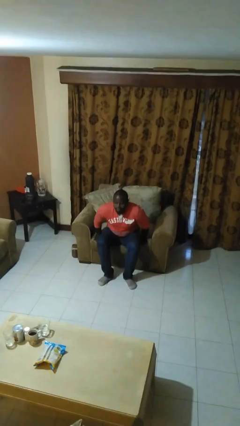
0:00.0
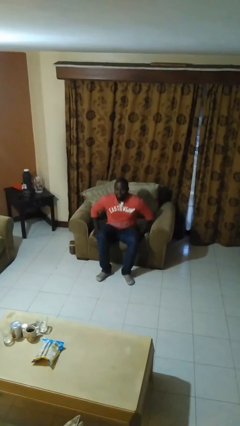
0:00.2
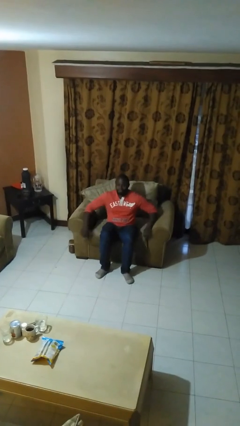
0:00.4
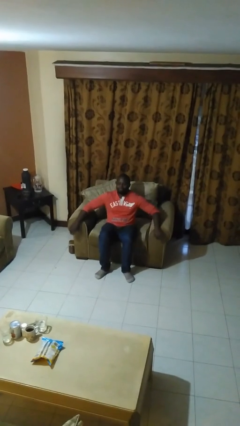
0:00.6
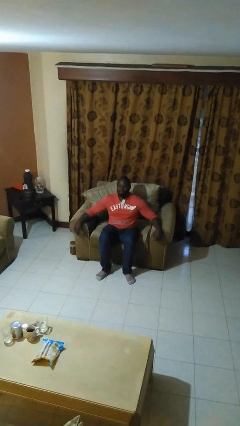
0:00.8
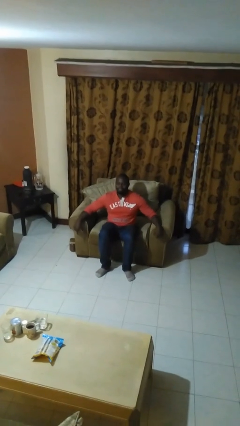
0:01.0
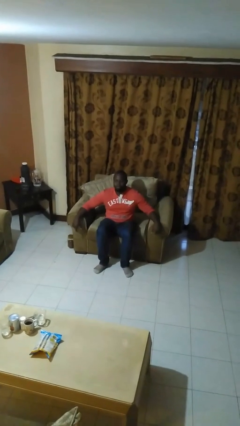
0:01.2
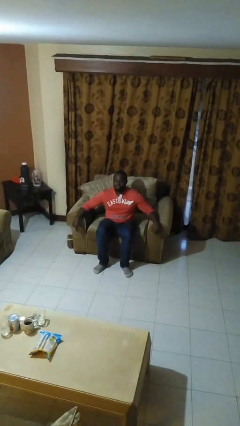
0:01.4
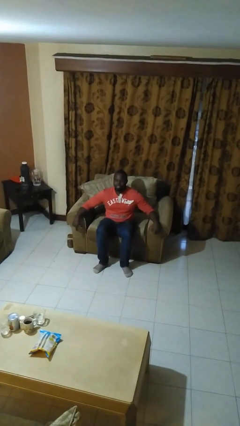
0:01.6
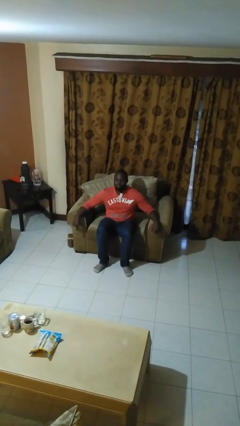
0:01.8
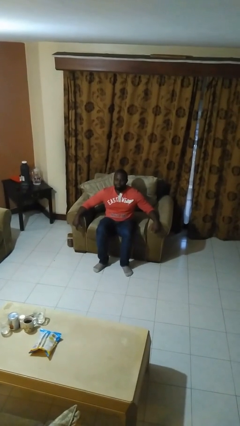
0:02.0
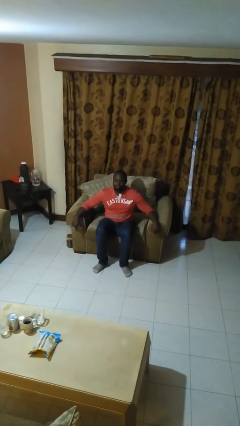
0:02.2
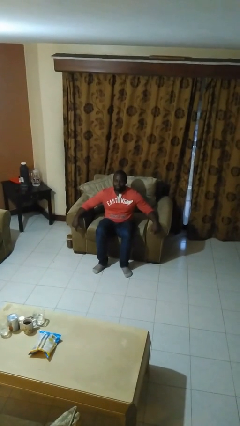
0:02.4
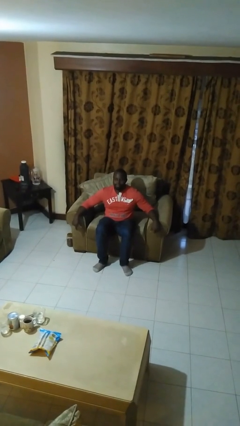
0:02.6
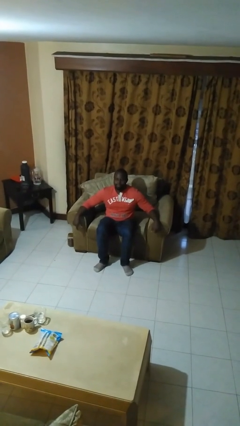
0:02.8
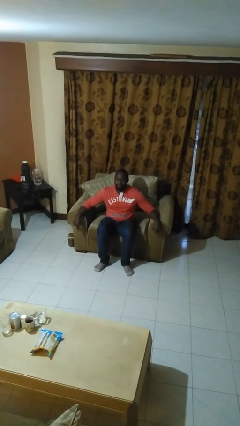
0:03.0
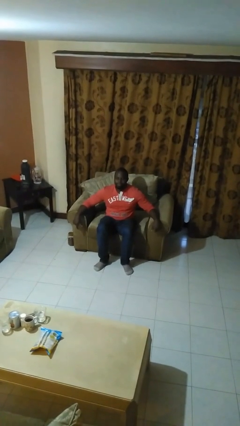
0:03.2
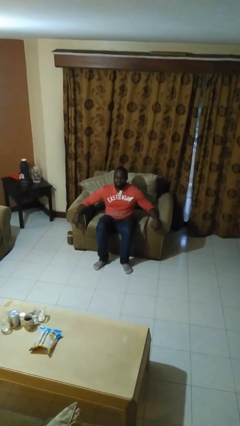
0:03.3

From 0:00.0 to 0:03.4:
person sits down

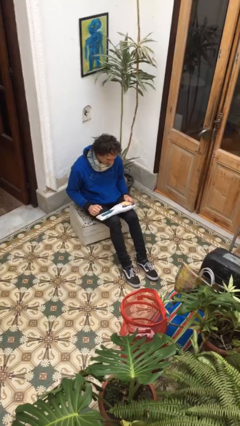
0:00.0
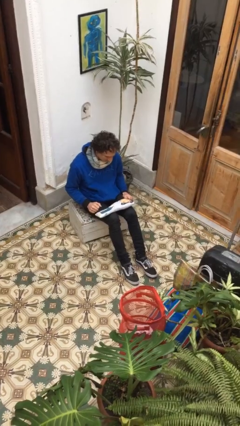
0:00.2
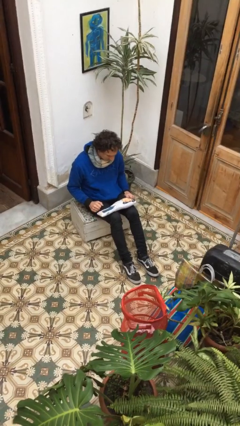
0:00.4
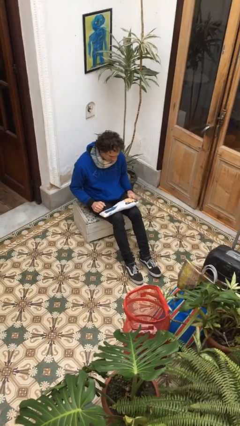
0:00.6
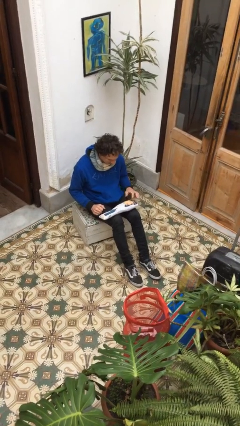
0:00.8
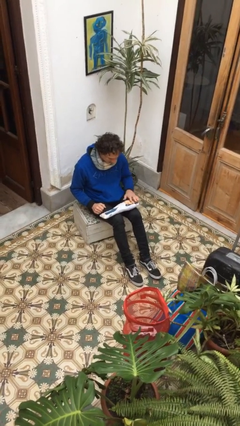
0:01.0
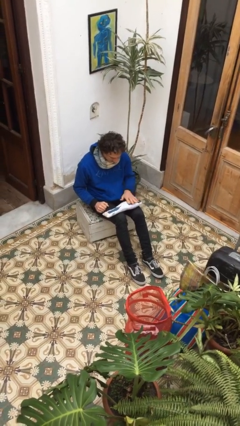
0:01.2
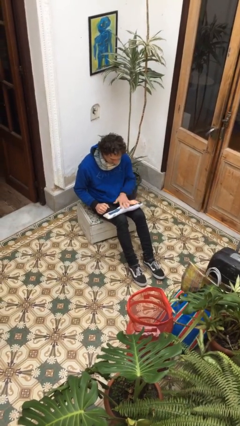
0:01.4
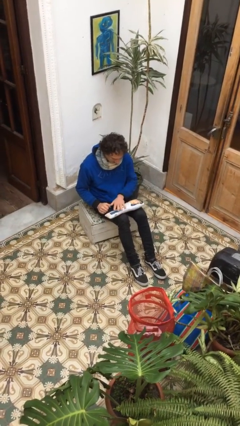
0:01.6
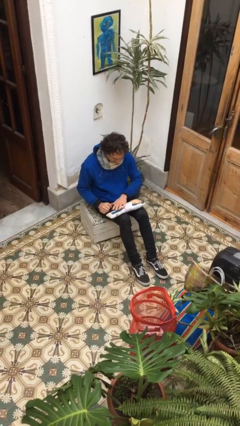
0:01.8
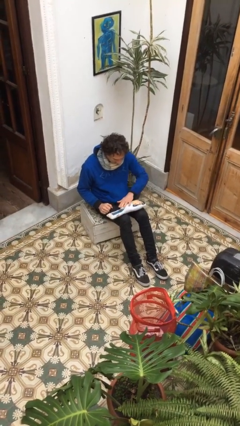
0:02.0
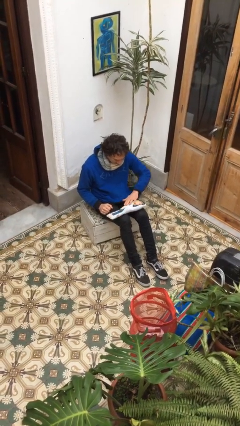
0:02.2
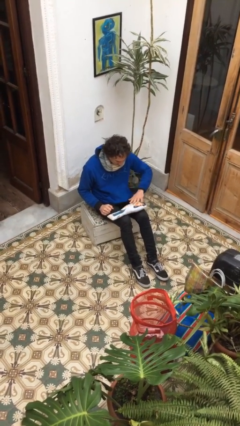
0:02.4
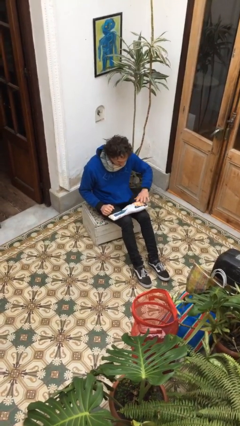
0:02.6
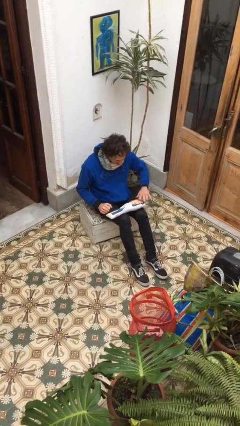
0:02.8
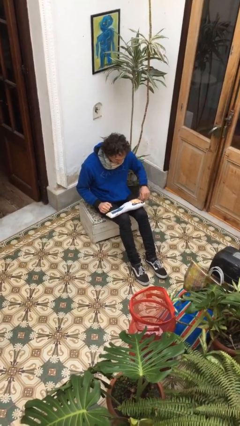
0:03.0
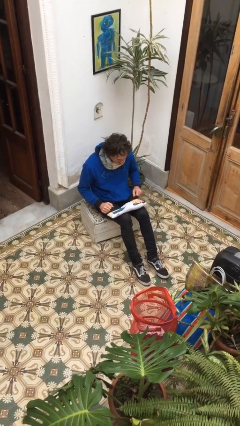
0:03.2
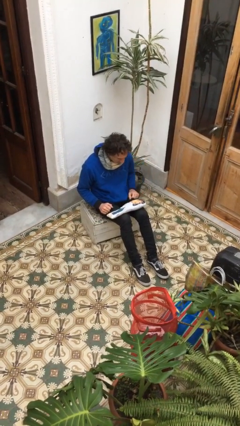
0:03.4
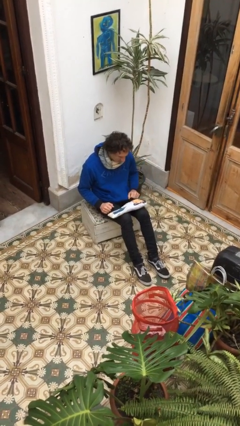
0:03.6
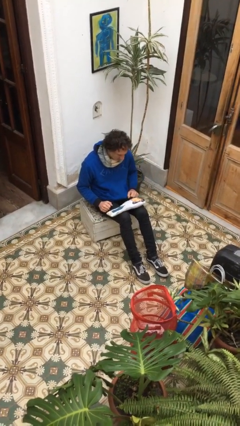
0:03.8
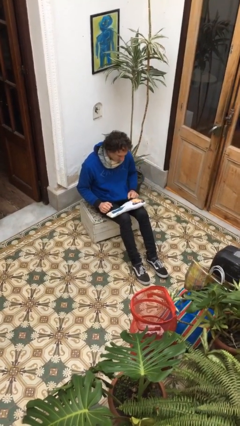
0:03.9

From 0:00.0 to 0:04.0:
person waves hand over object

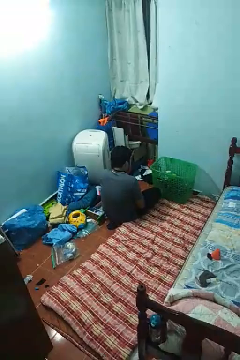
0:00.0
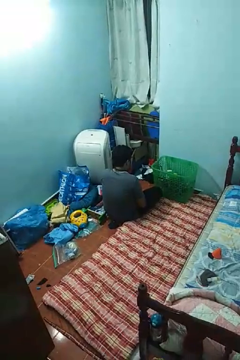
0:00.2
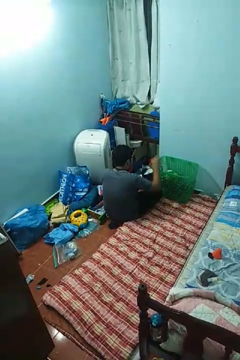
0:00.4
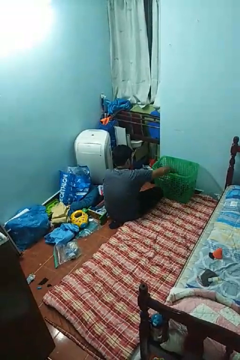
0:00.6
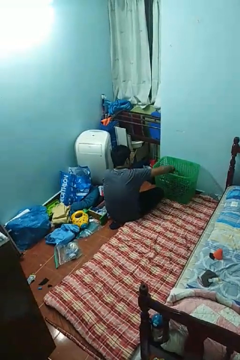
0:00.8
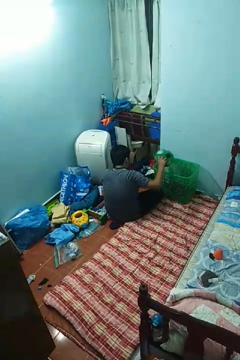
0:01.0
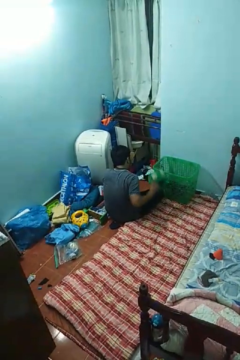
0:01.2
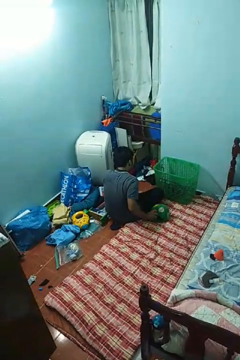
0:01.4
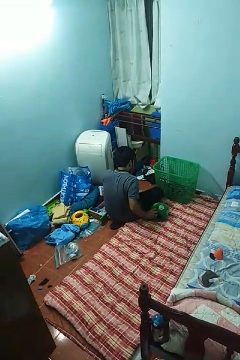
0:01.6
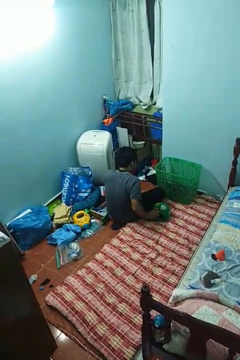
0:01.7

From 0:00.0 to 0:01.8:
person takes object from basket

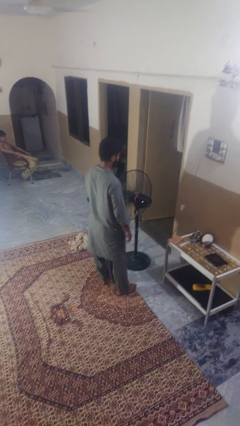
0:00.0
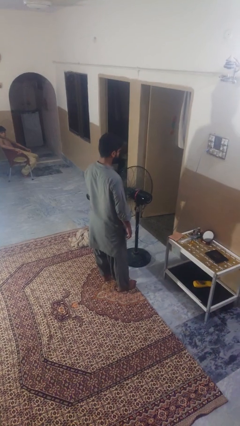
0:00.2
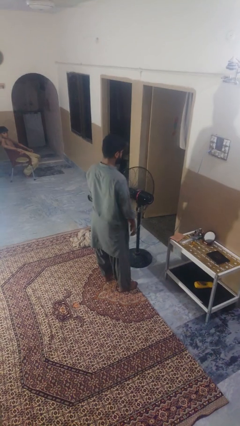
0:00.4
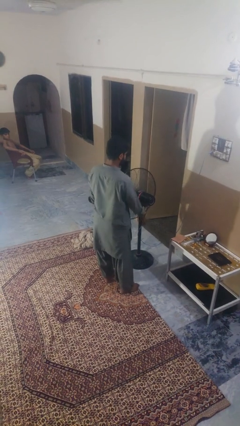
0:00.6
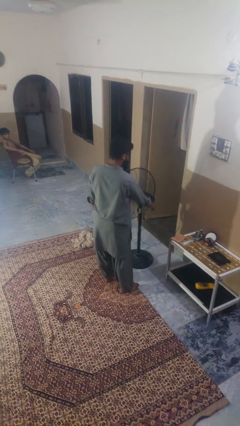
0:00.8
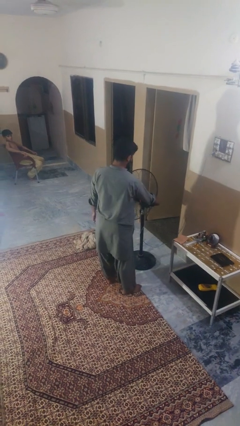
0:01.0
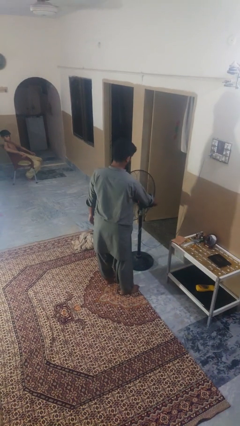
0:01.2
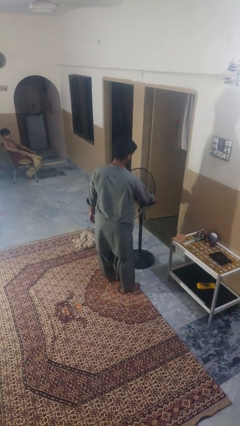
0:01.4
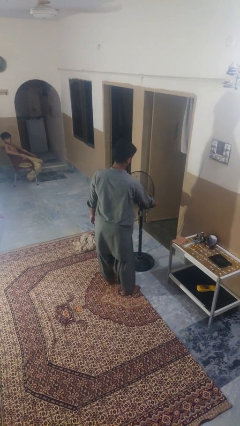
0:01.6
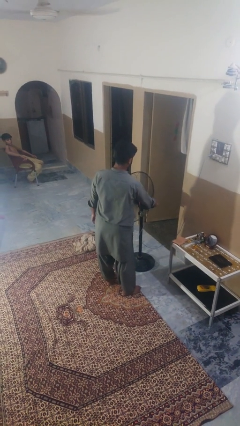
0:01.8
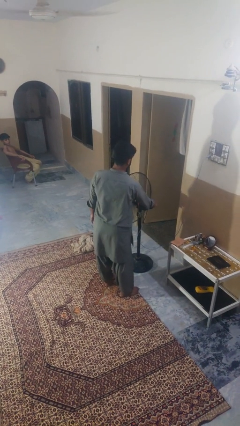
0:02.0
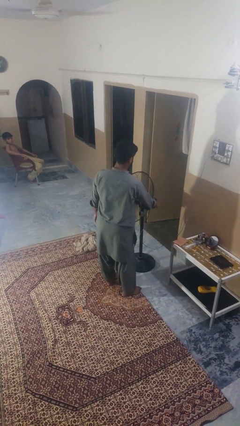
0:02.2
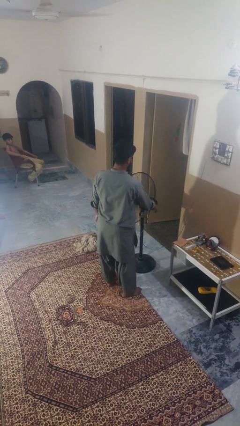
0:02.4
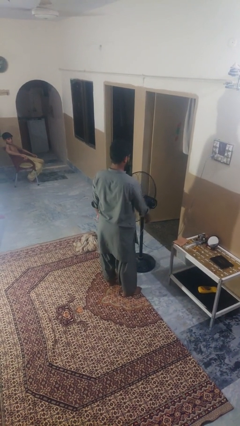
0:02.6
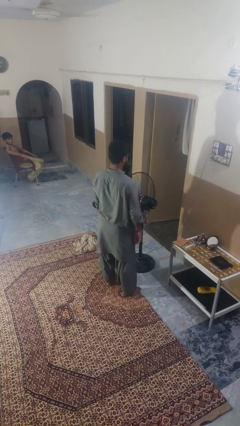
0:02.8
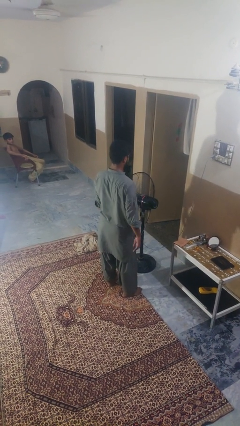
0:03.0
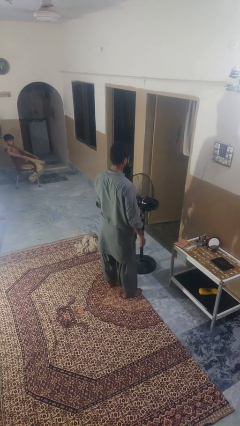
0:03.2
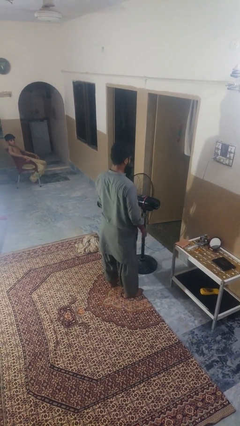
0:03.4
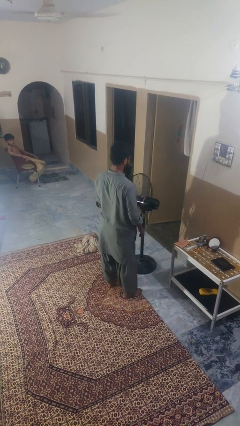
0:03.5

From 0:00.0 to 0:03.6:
person turns off fan

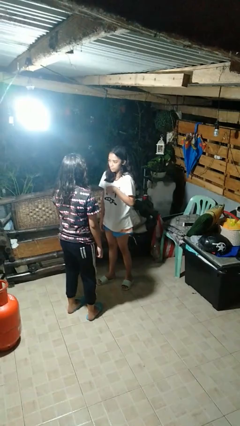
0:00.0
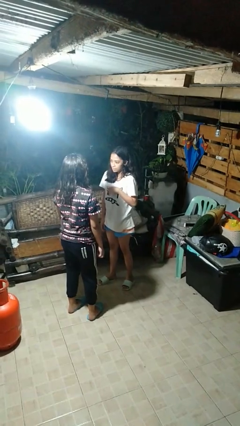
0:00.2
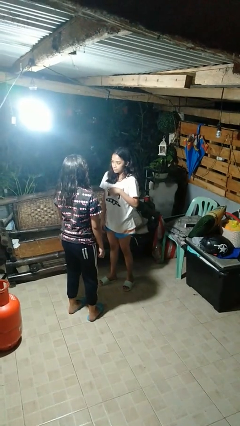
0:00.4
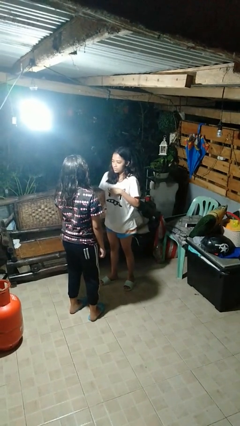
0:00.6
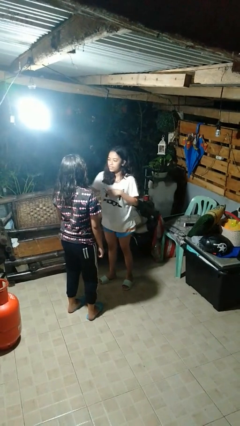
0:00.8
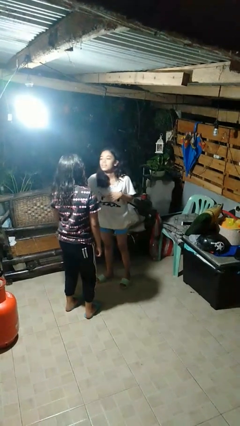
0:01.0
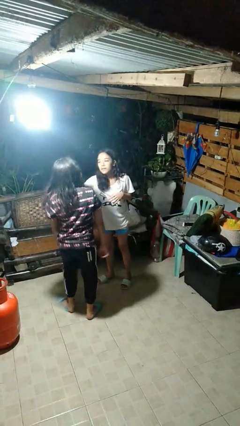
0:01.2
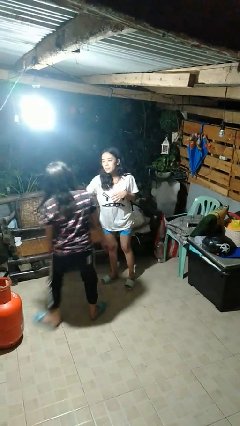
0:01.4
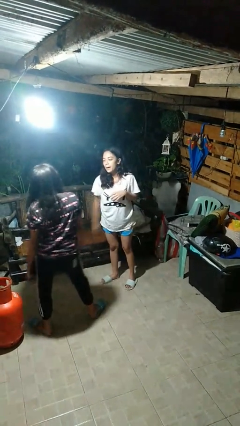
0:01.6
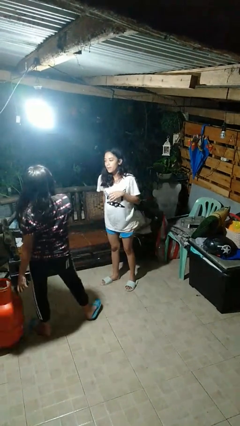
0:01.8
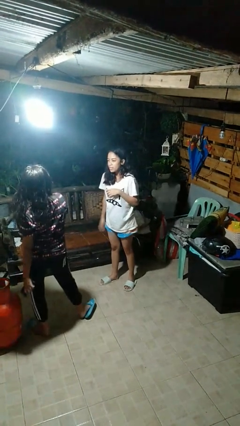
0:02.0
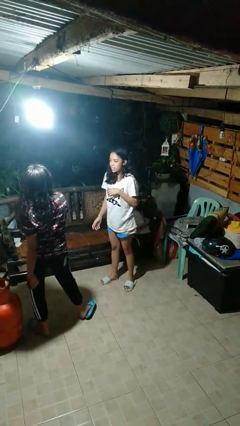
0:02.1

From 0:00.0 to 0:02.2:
person shoves person

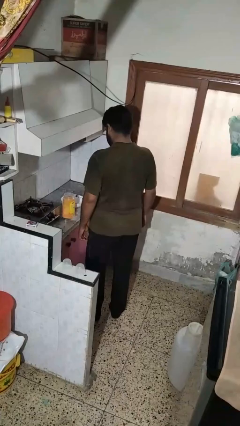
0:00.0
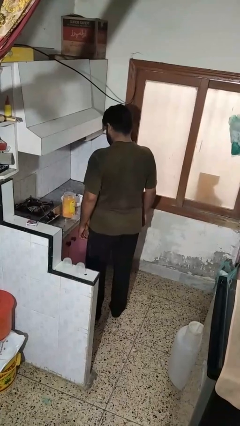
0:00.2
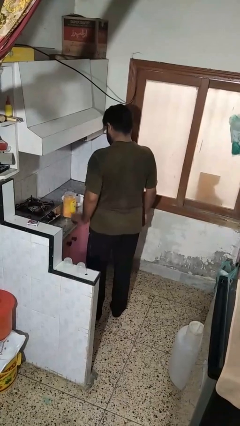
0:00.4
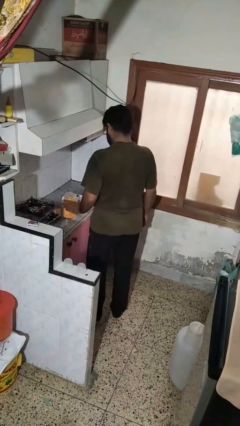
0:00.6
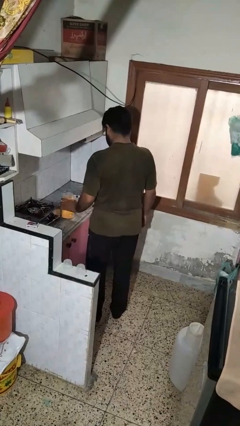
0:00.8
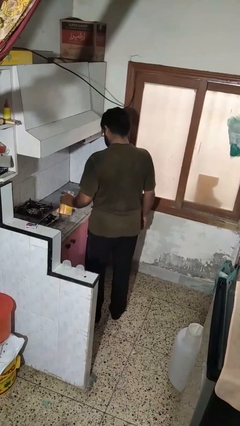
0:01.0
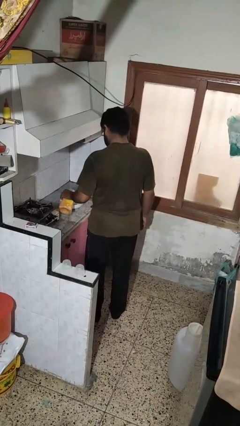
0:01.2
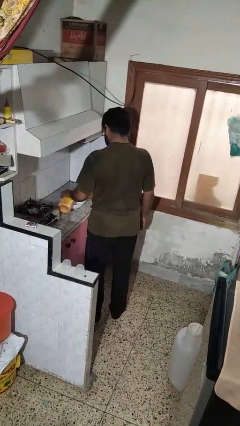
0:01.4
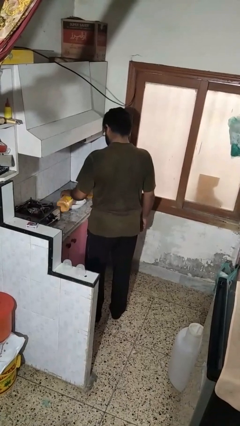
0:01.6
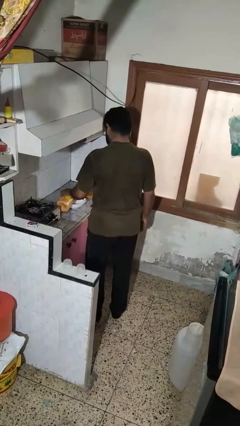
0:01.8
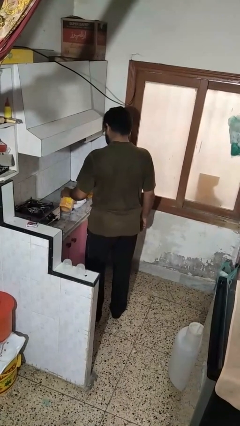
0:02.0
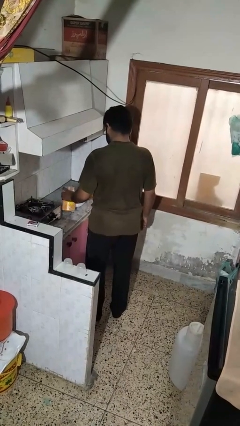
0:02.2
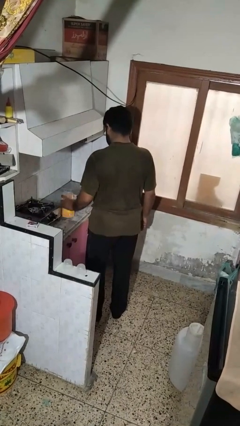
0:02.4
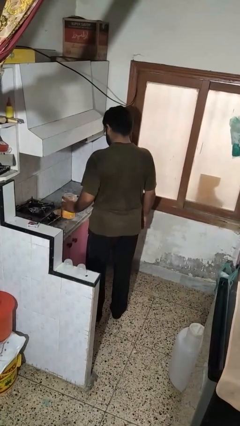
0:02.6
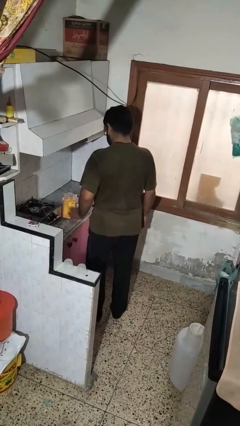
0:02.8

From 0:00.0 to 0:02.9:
person pours into bowl
